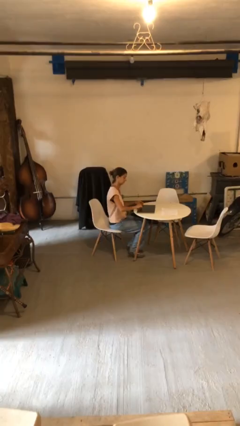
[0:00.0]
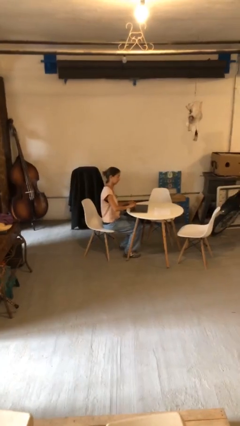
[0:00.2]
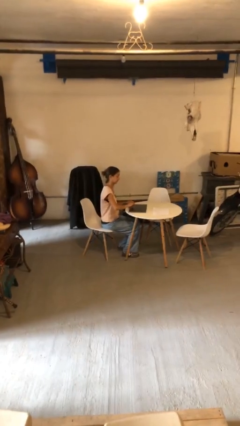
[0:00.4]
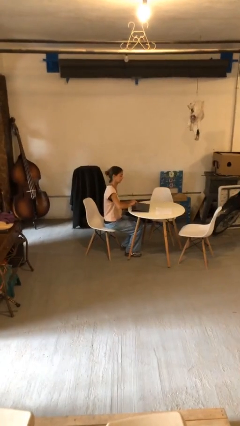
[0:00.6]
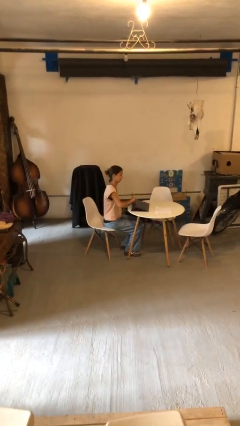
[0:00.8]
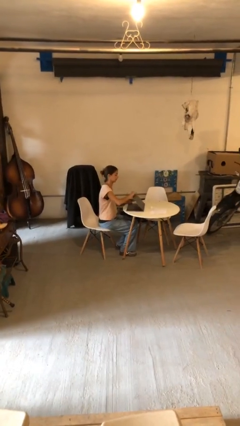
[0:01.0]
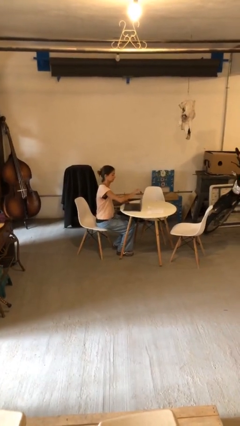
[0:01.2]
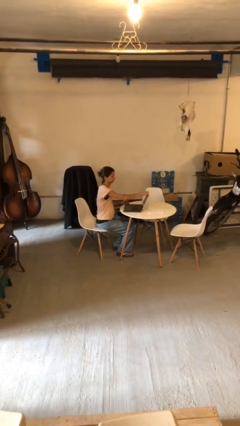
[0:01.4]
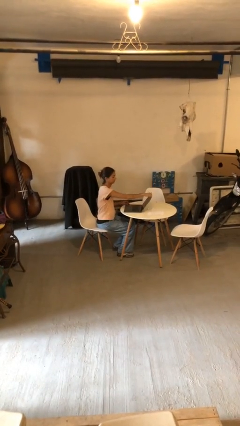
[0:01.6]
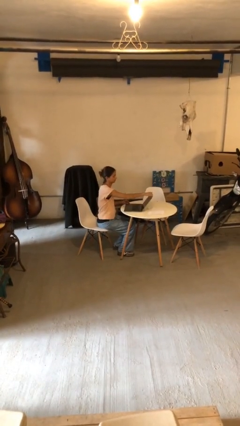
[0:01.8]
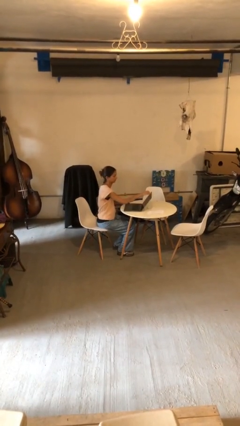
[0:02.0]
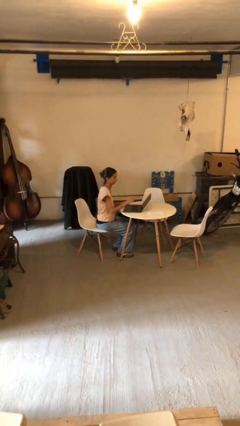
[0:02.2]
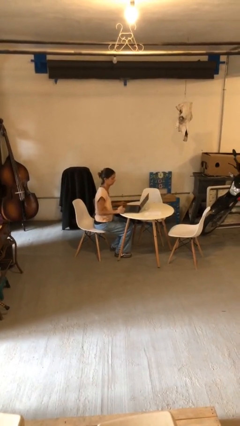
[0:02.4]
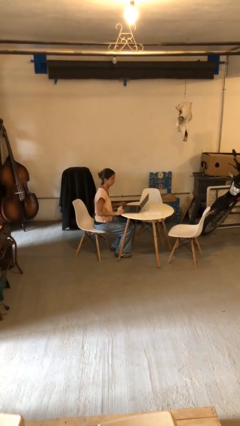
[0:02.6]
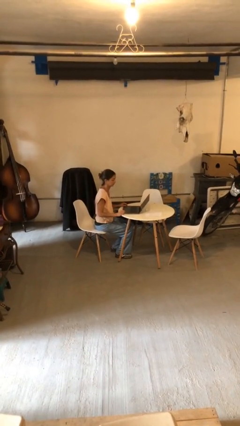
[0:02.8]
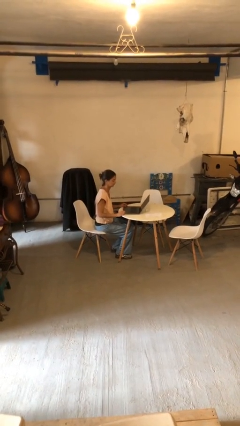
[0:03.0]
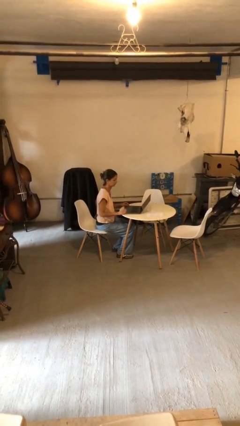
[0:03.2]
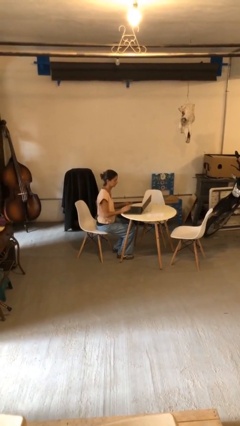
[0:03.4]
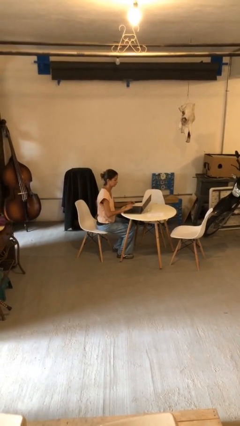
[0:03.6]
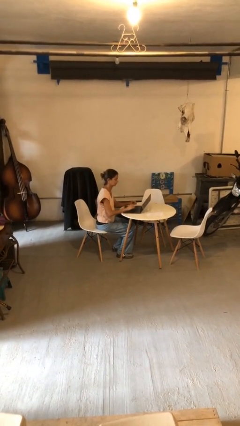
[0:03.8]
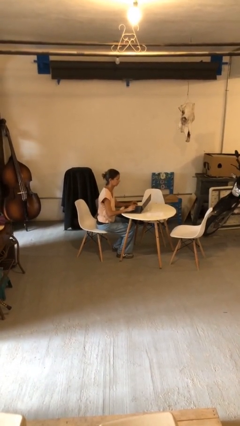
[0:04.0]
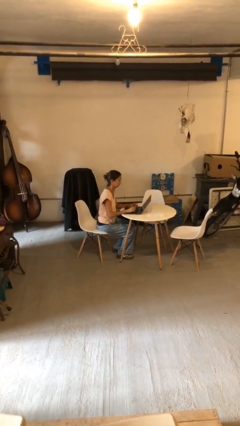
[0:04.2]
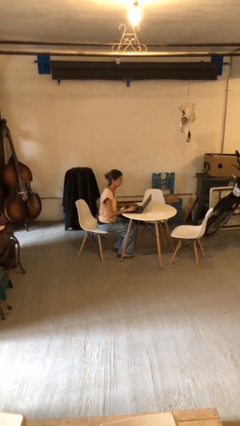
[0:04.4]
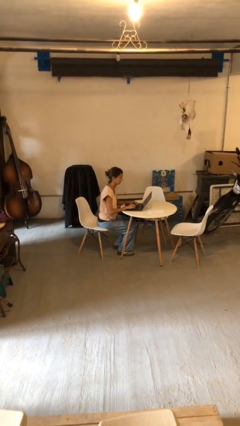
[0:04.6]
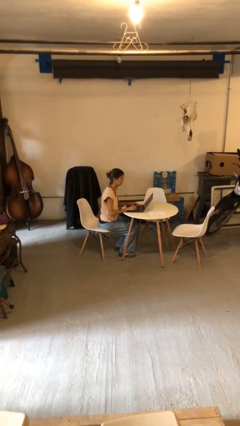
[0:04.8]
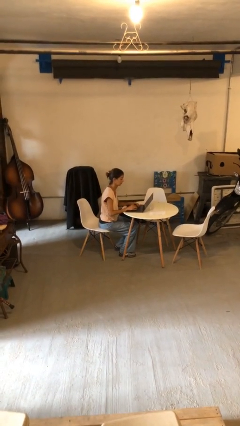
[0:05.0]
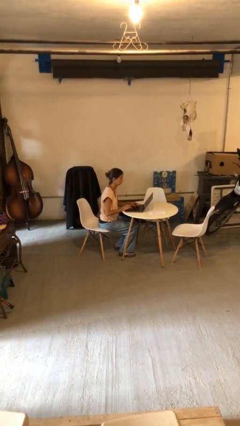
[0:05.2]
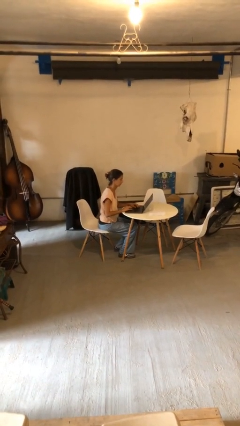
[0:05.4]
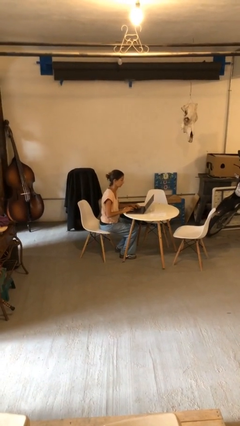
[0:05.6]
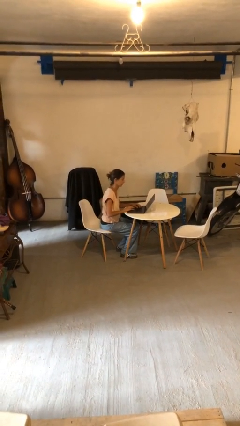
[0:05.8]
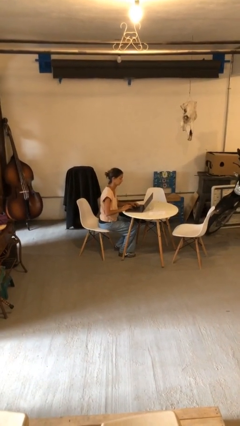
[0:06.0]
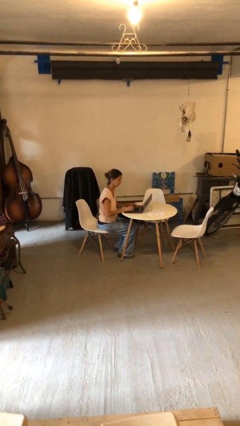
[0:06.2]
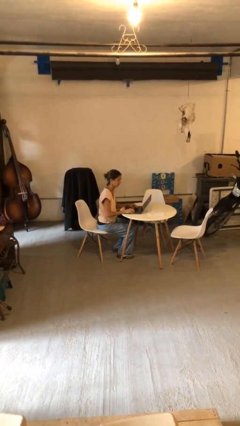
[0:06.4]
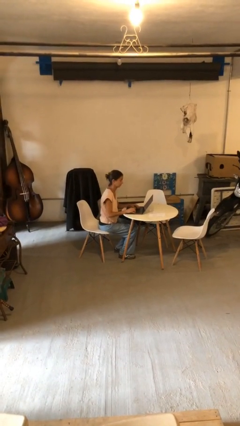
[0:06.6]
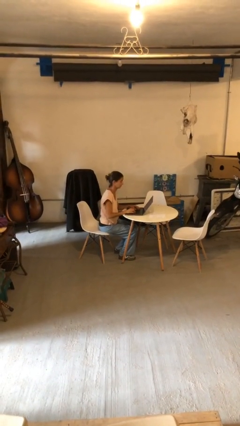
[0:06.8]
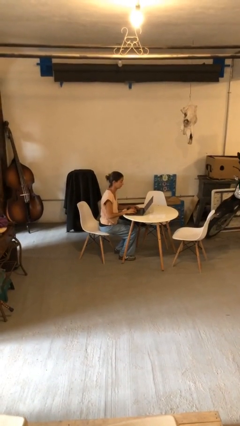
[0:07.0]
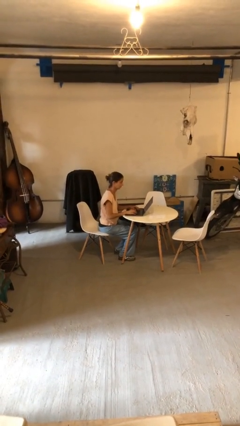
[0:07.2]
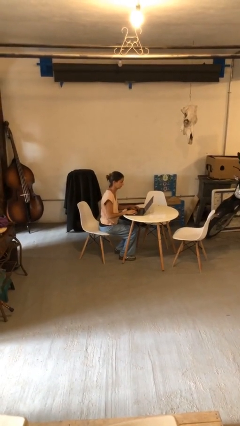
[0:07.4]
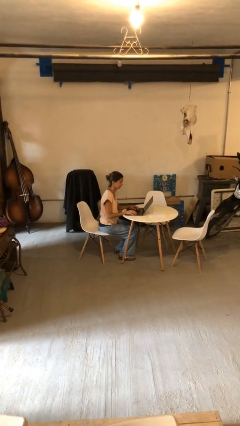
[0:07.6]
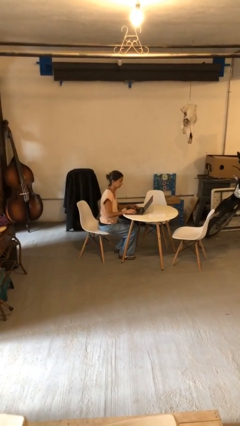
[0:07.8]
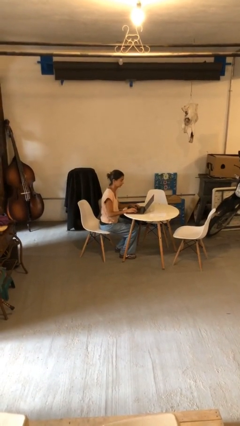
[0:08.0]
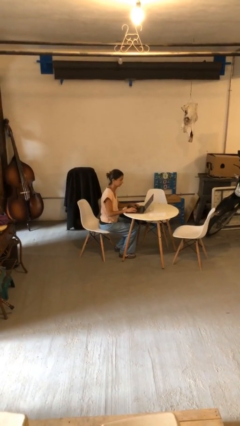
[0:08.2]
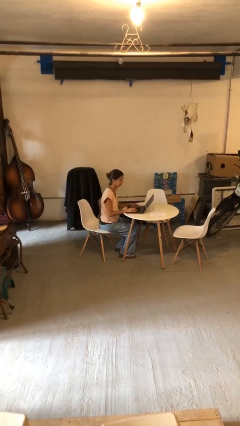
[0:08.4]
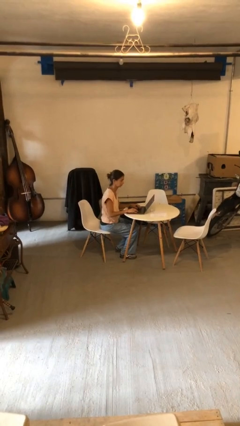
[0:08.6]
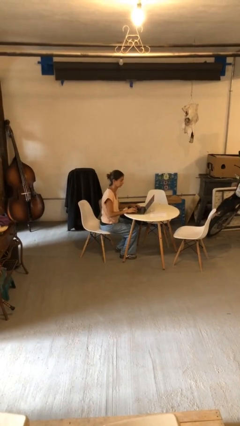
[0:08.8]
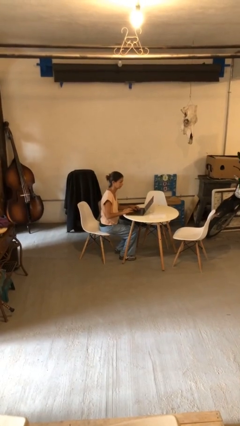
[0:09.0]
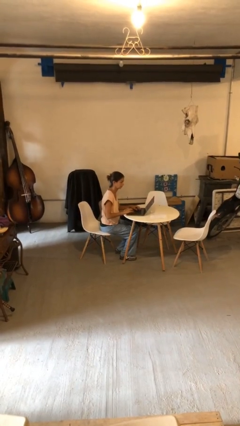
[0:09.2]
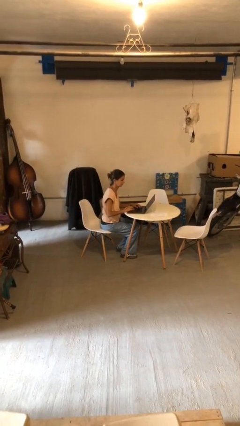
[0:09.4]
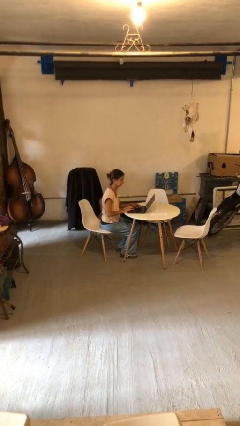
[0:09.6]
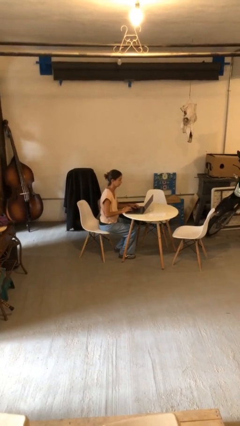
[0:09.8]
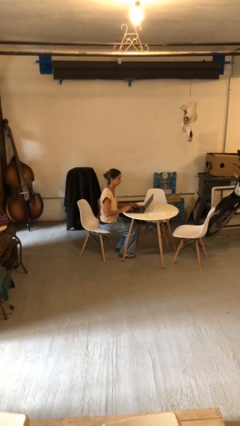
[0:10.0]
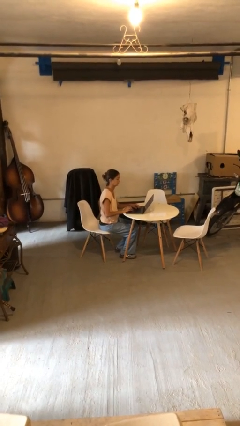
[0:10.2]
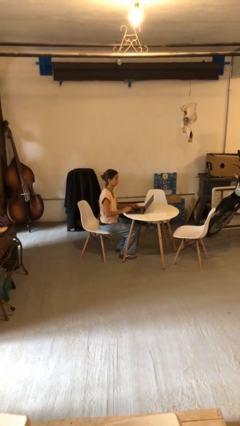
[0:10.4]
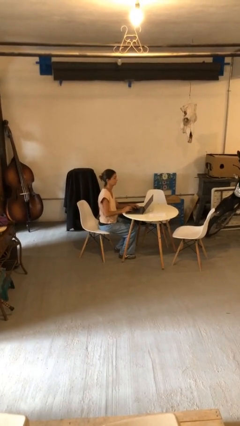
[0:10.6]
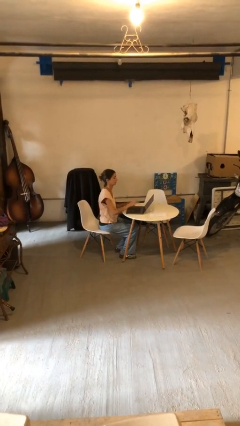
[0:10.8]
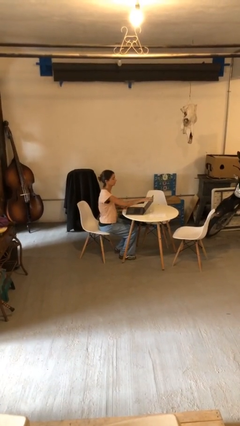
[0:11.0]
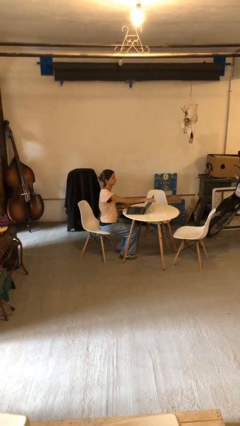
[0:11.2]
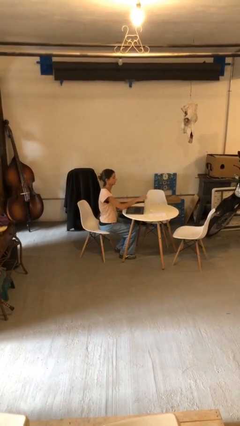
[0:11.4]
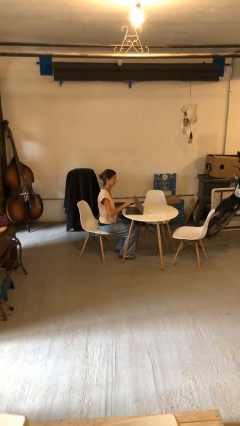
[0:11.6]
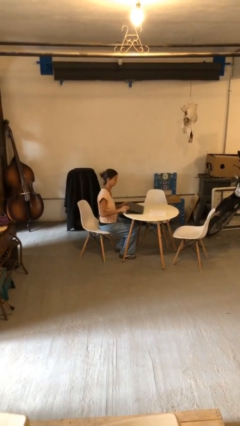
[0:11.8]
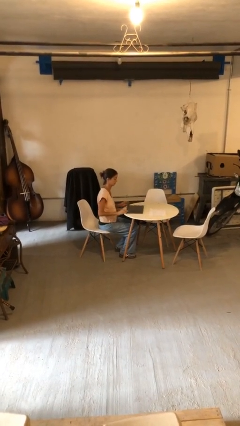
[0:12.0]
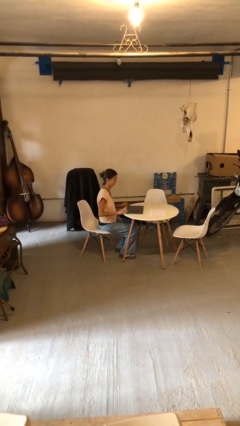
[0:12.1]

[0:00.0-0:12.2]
person interacts with laptop

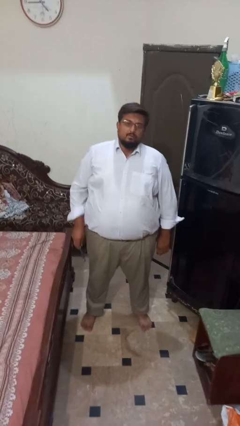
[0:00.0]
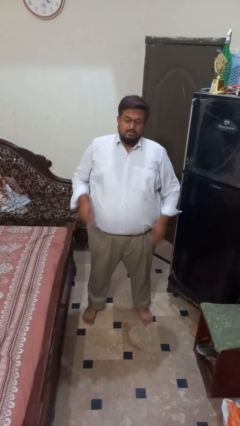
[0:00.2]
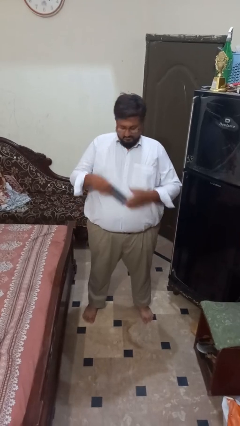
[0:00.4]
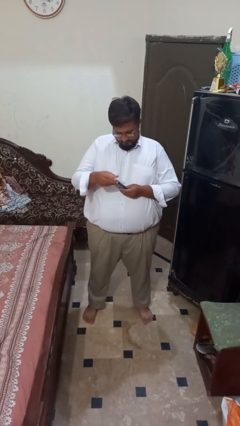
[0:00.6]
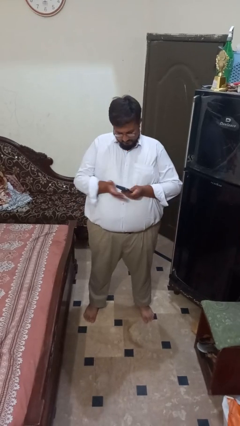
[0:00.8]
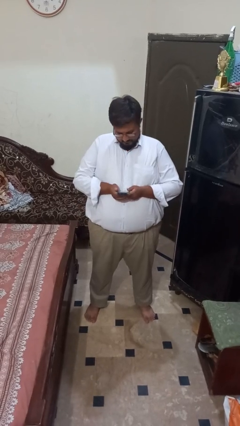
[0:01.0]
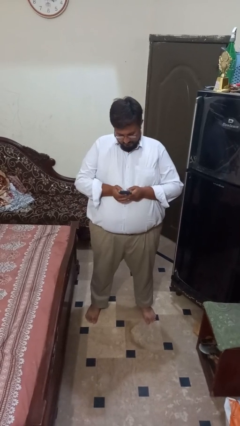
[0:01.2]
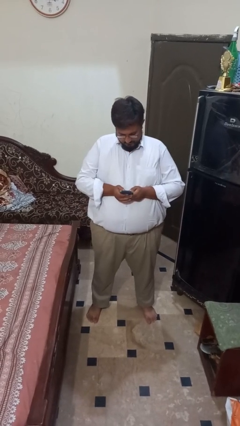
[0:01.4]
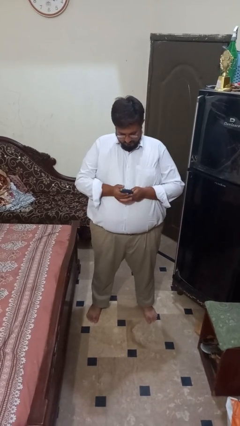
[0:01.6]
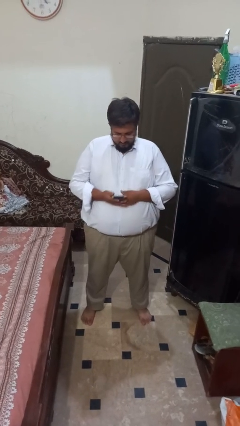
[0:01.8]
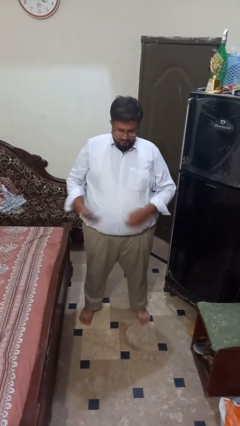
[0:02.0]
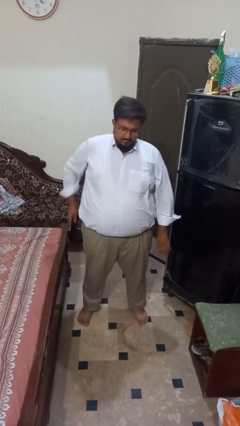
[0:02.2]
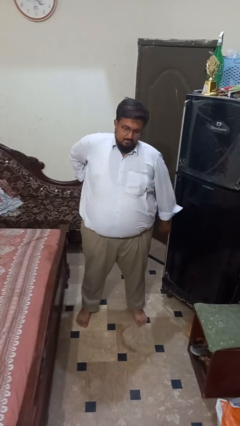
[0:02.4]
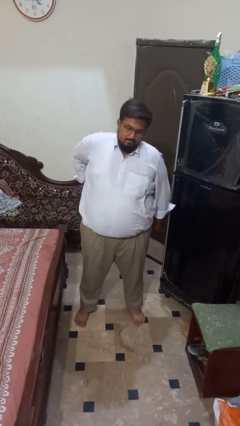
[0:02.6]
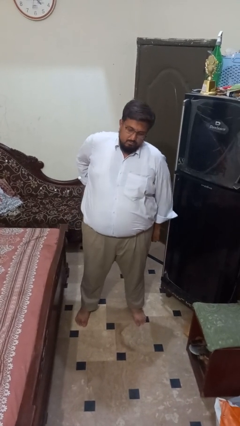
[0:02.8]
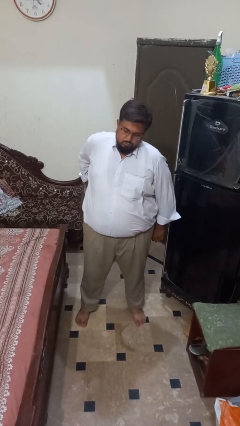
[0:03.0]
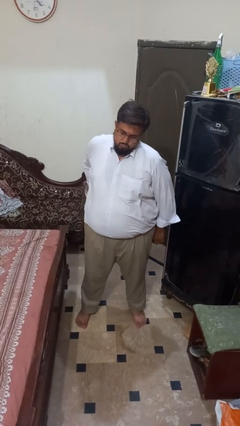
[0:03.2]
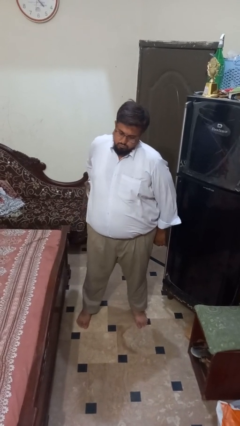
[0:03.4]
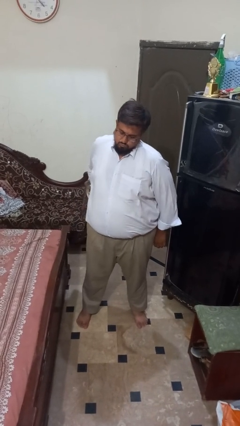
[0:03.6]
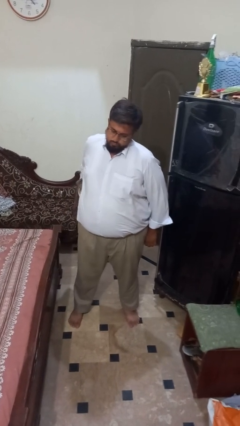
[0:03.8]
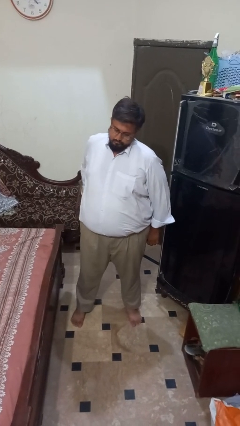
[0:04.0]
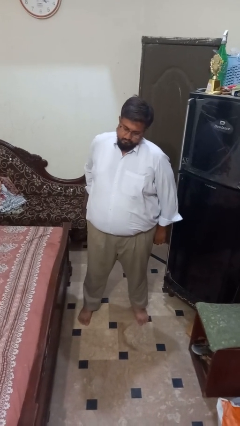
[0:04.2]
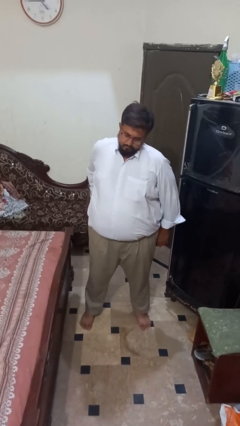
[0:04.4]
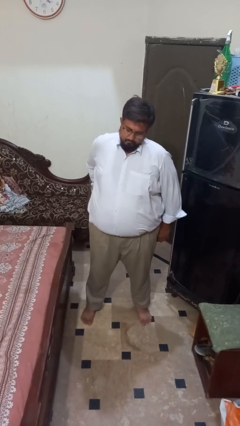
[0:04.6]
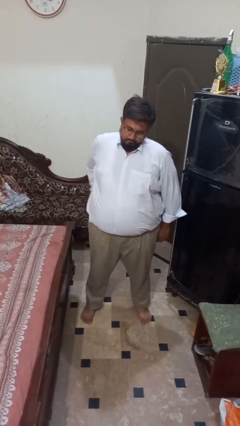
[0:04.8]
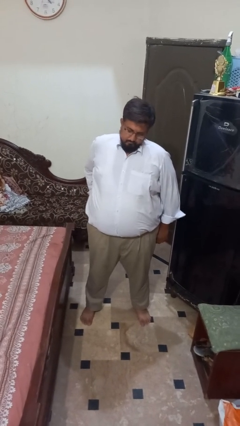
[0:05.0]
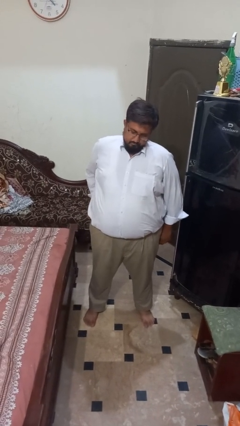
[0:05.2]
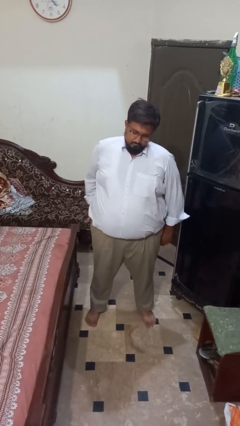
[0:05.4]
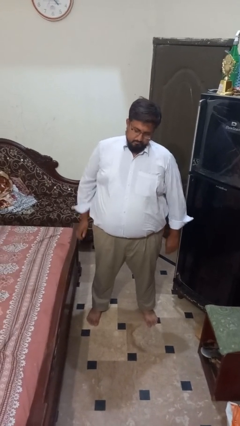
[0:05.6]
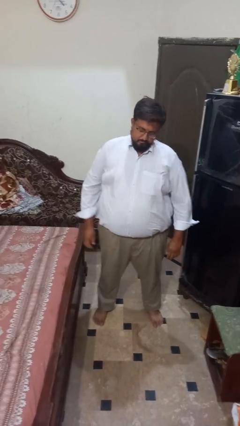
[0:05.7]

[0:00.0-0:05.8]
person puts phone into pocket
